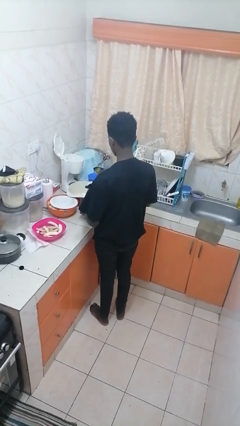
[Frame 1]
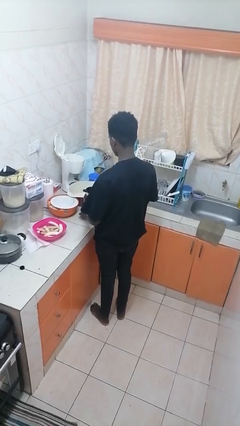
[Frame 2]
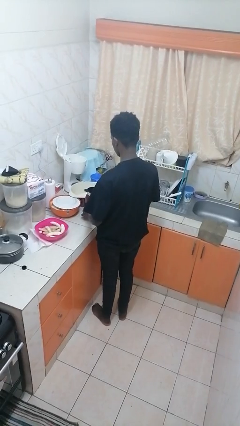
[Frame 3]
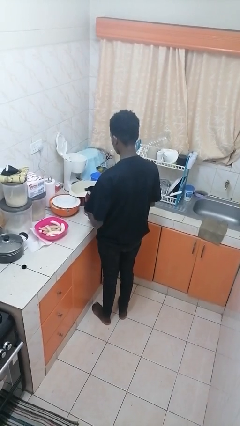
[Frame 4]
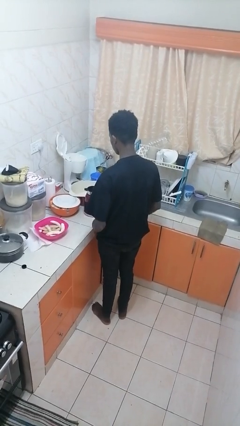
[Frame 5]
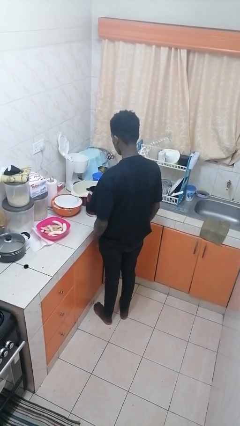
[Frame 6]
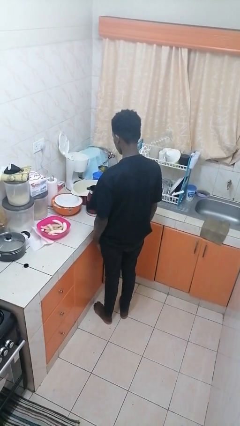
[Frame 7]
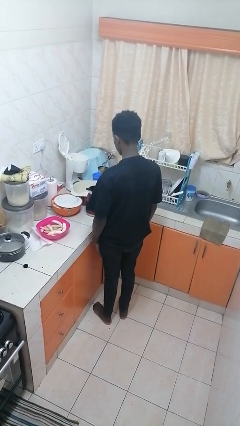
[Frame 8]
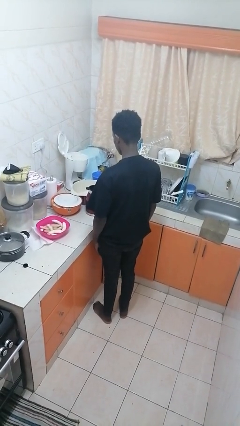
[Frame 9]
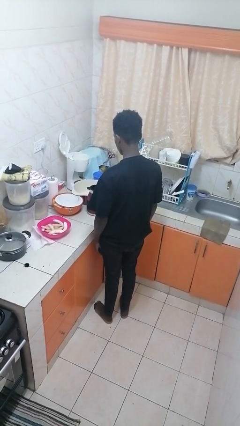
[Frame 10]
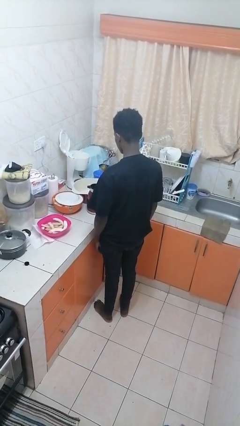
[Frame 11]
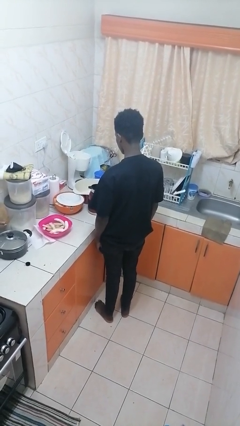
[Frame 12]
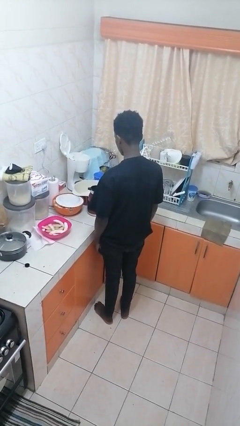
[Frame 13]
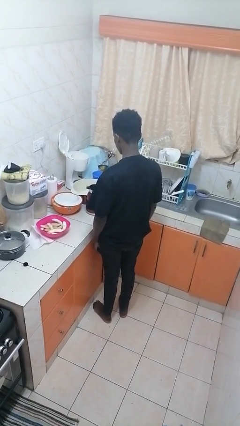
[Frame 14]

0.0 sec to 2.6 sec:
person puts down object on countertop

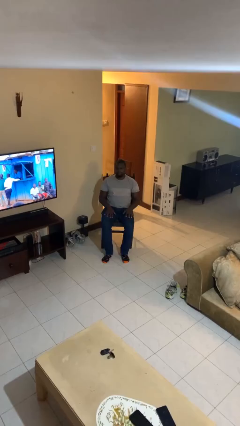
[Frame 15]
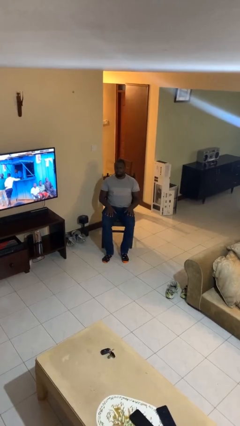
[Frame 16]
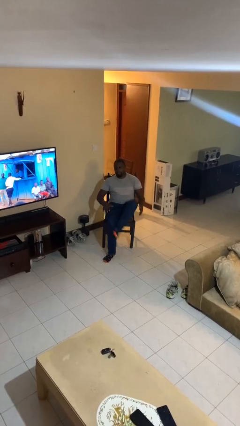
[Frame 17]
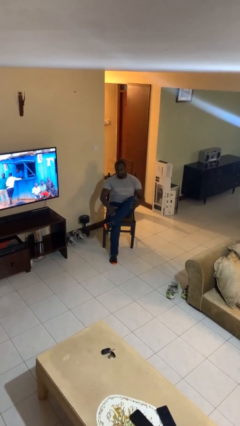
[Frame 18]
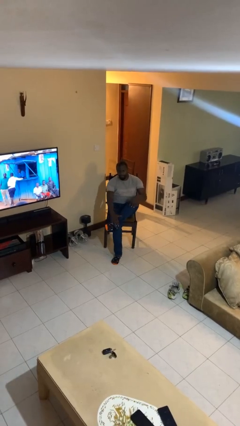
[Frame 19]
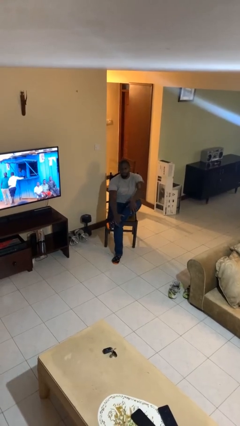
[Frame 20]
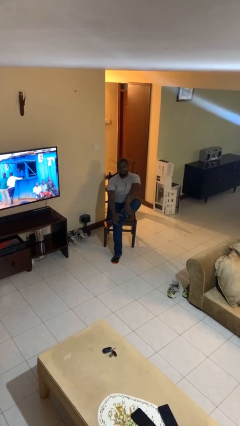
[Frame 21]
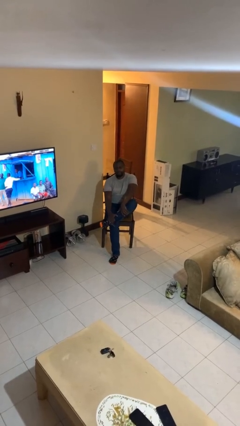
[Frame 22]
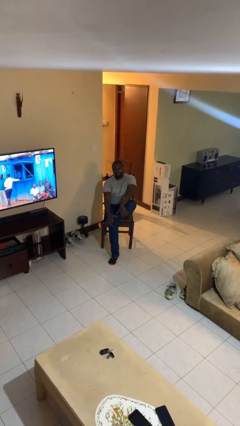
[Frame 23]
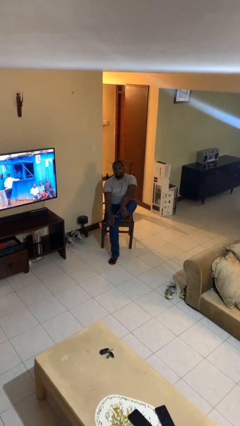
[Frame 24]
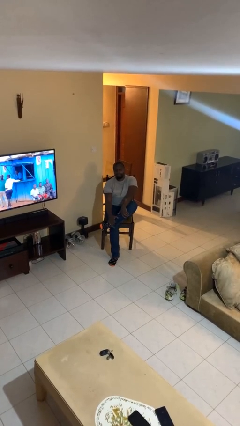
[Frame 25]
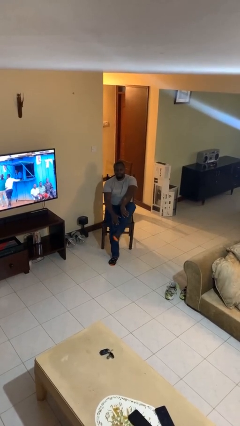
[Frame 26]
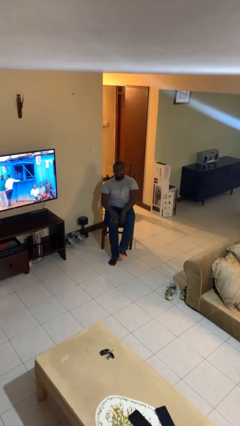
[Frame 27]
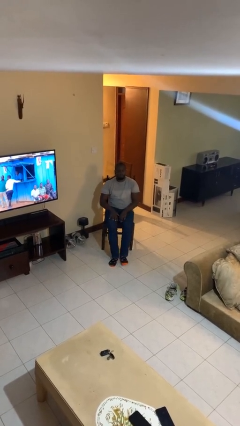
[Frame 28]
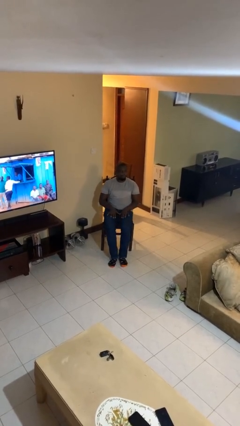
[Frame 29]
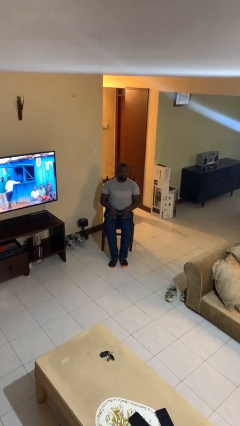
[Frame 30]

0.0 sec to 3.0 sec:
person crosses legs

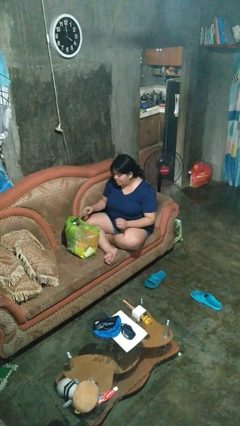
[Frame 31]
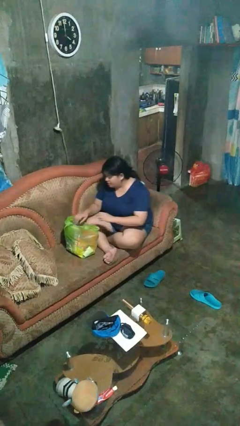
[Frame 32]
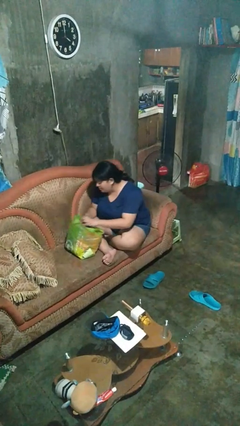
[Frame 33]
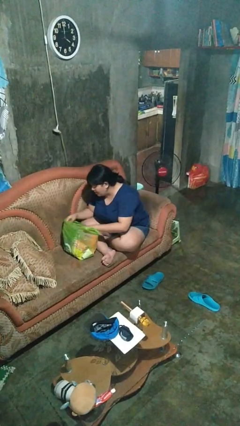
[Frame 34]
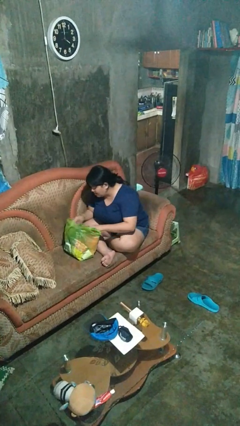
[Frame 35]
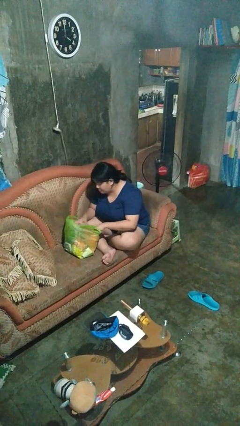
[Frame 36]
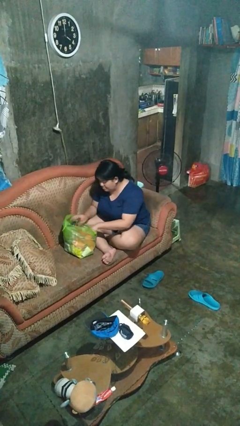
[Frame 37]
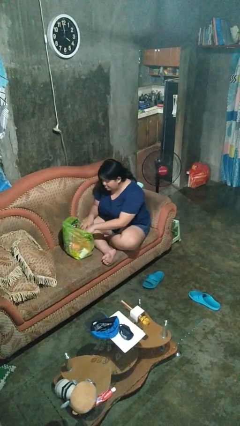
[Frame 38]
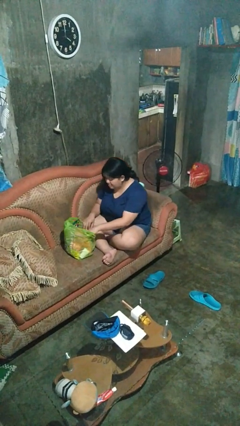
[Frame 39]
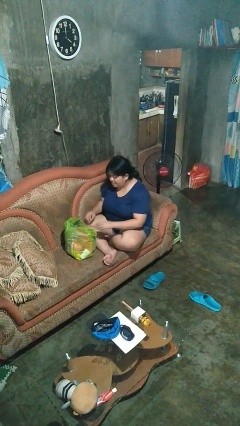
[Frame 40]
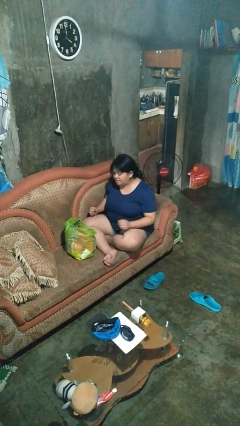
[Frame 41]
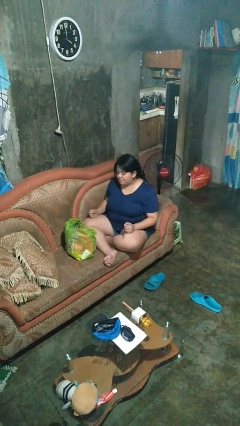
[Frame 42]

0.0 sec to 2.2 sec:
person searches in bag

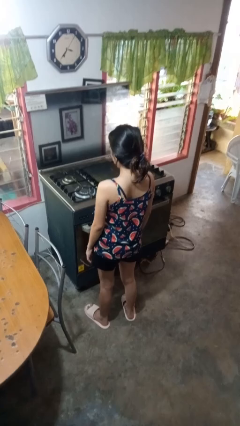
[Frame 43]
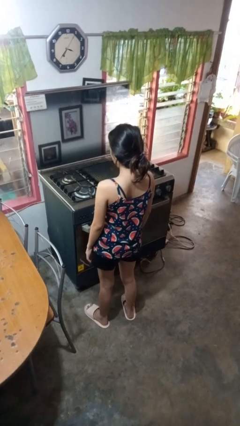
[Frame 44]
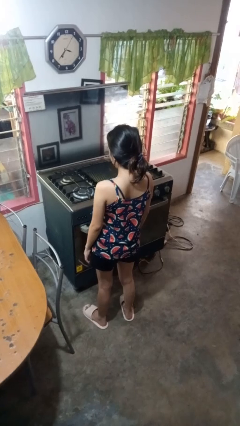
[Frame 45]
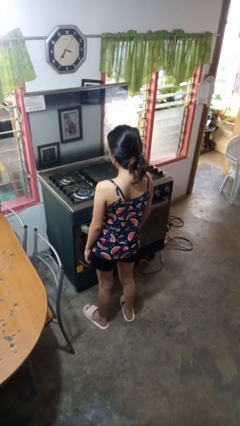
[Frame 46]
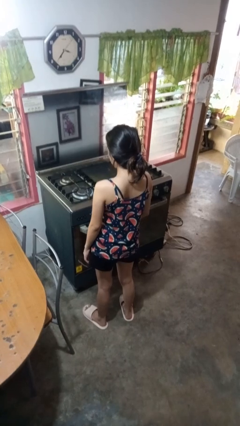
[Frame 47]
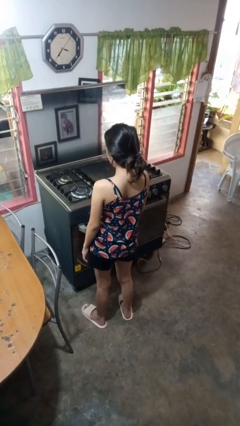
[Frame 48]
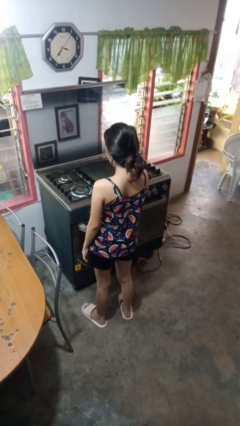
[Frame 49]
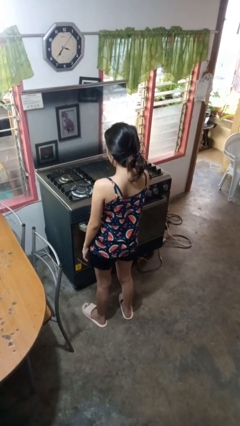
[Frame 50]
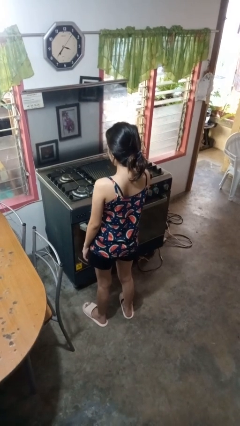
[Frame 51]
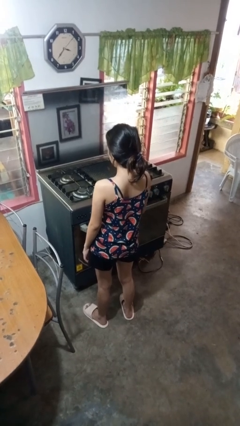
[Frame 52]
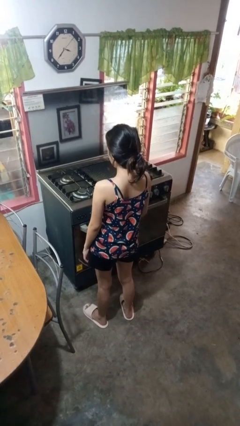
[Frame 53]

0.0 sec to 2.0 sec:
person turns off stovetop

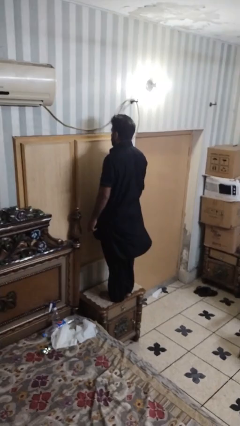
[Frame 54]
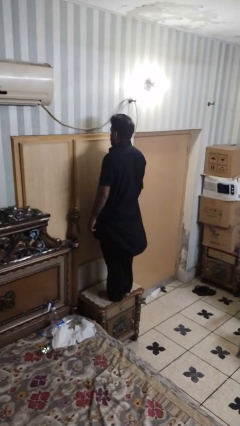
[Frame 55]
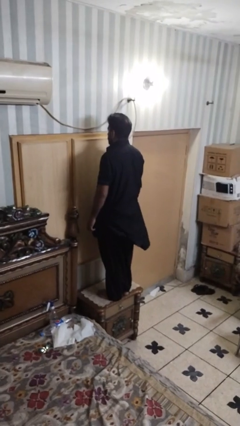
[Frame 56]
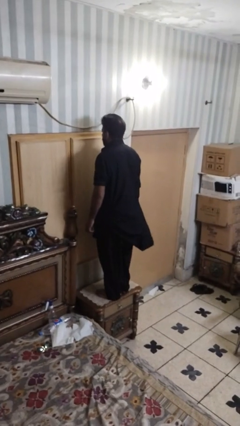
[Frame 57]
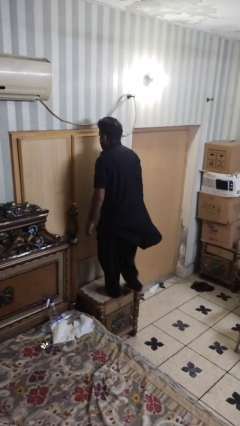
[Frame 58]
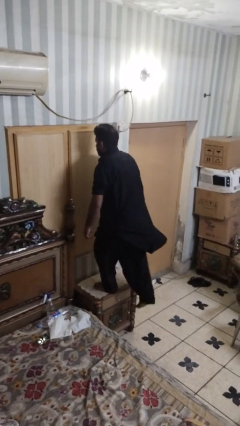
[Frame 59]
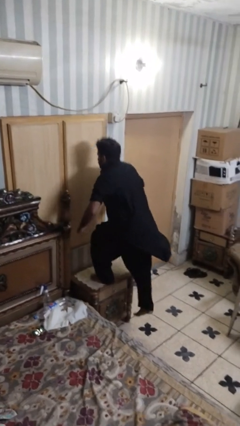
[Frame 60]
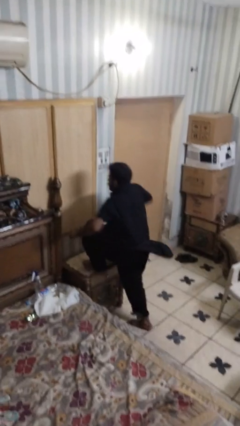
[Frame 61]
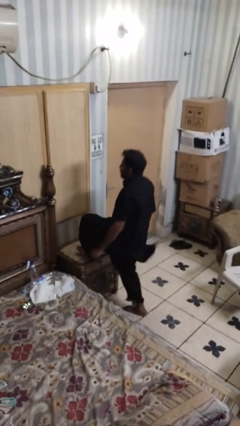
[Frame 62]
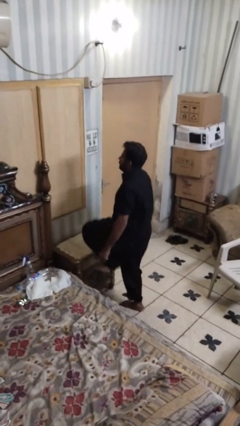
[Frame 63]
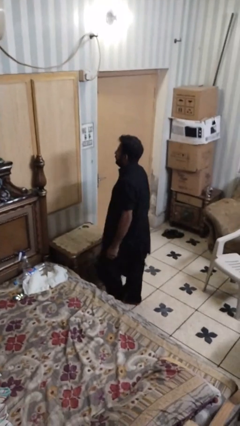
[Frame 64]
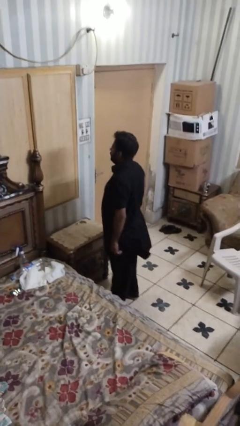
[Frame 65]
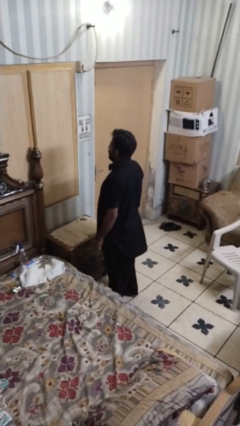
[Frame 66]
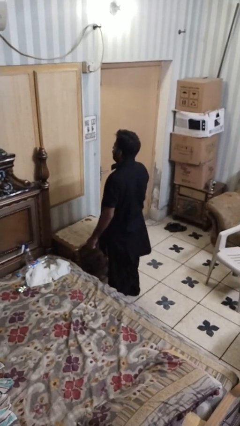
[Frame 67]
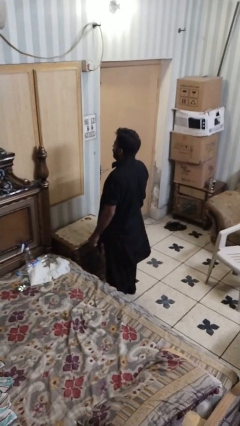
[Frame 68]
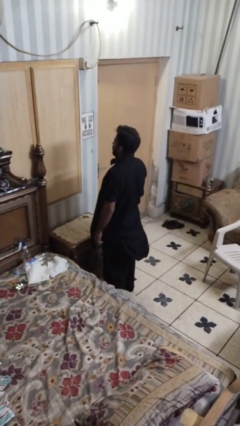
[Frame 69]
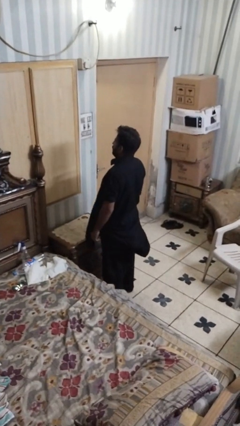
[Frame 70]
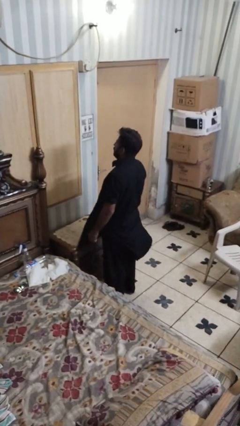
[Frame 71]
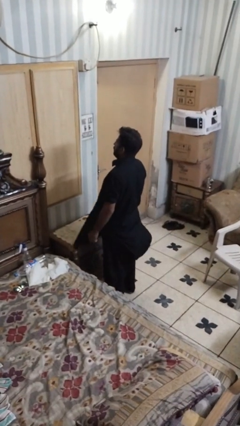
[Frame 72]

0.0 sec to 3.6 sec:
person climbs off table

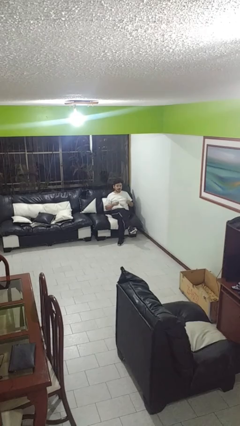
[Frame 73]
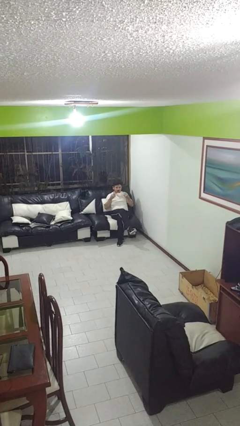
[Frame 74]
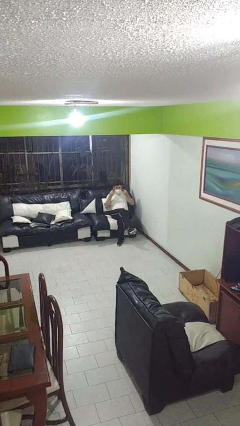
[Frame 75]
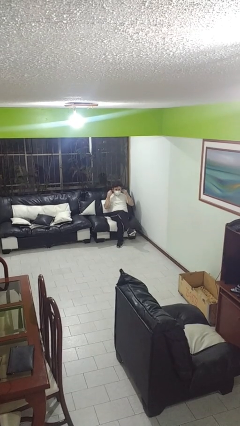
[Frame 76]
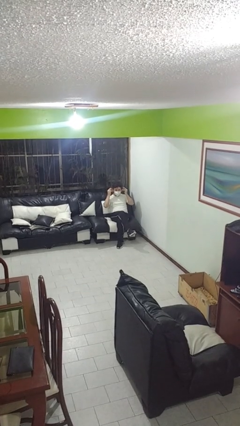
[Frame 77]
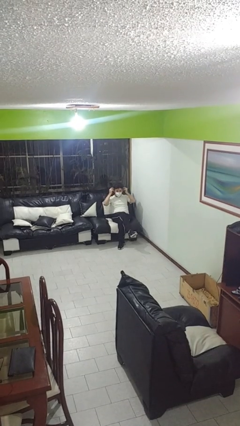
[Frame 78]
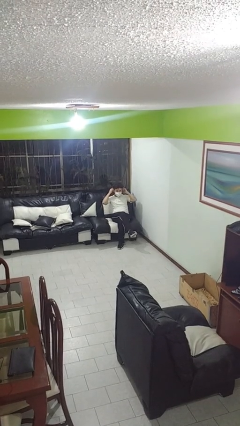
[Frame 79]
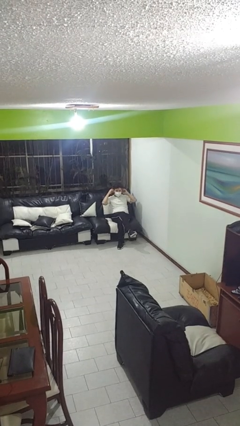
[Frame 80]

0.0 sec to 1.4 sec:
person puts on facemask

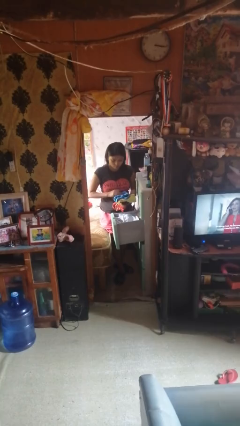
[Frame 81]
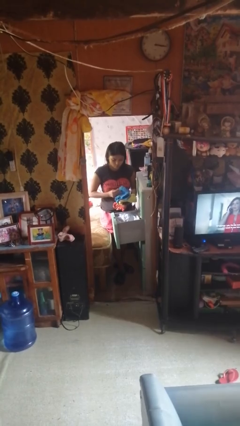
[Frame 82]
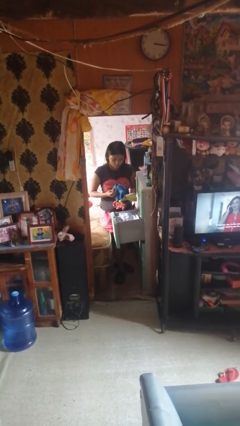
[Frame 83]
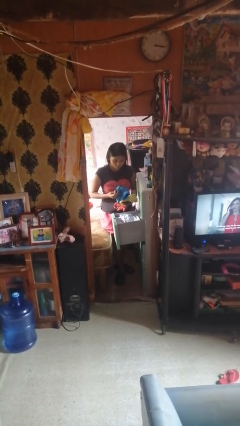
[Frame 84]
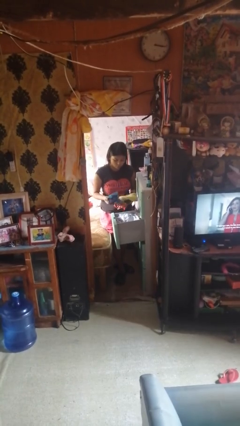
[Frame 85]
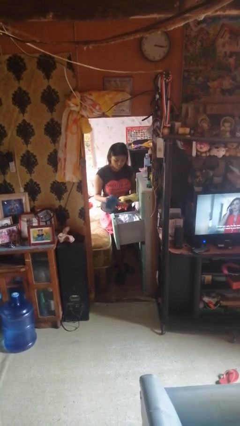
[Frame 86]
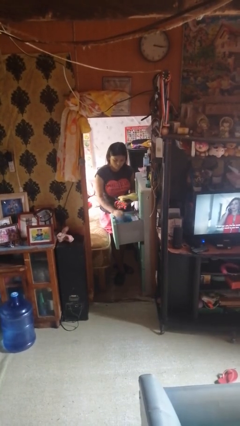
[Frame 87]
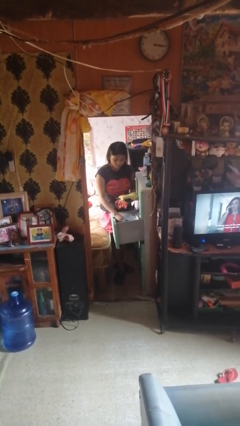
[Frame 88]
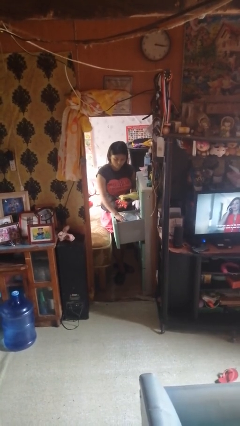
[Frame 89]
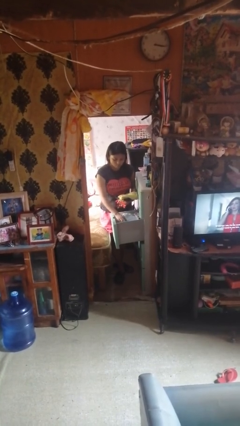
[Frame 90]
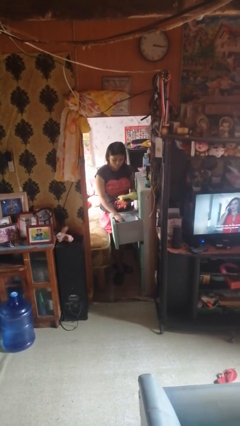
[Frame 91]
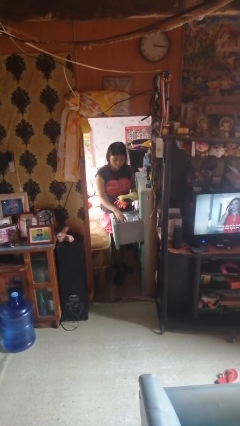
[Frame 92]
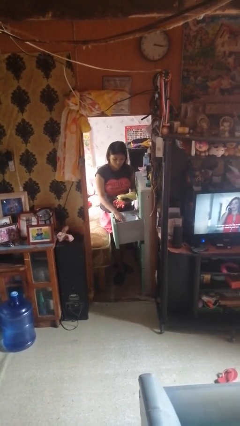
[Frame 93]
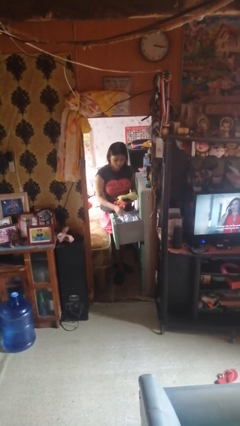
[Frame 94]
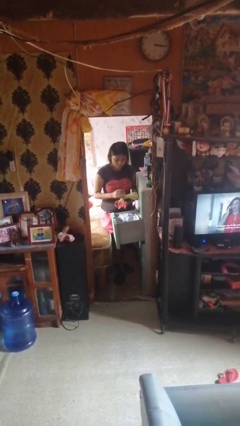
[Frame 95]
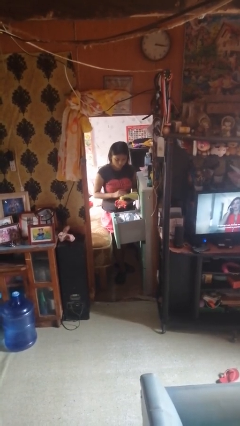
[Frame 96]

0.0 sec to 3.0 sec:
person puts clothes into dresser
